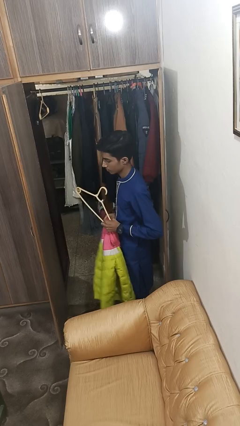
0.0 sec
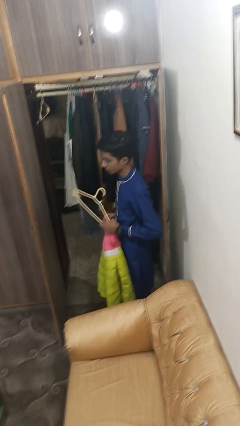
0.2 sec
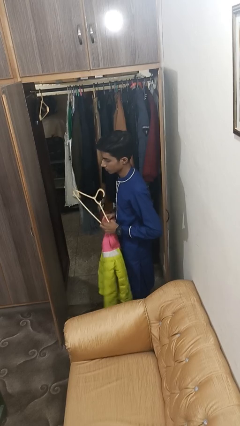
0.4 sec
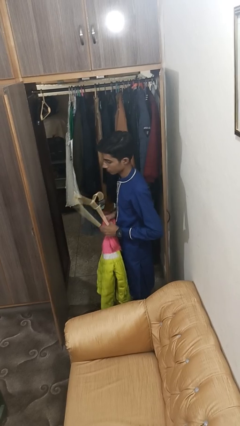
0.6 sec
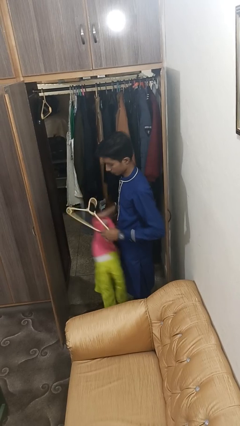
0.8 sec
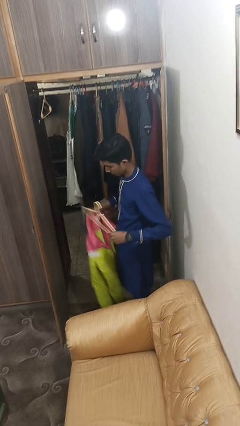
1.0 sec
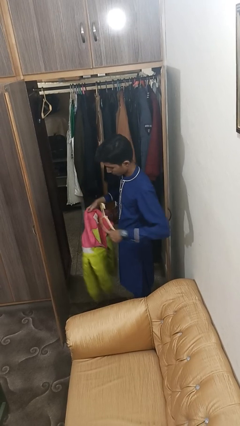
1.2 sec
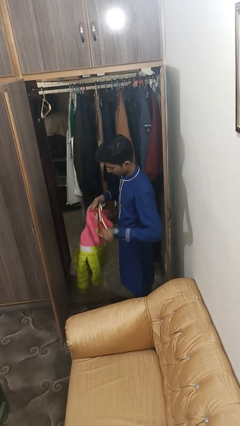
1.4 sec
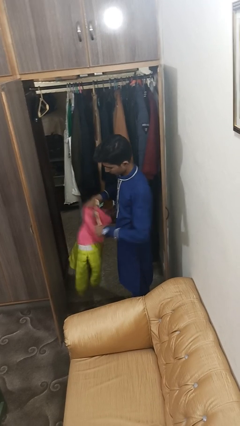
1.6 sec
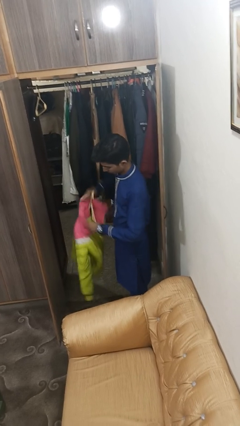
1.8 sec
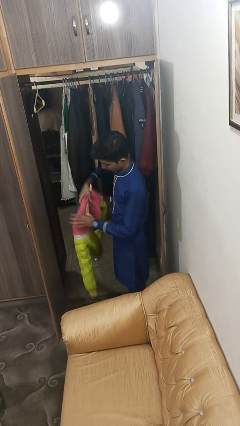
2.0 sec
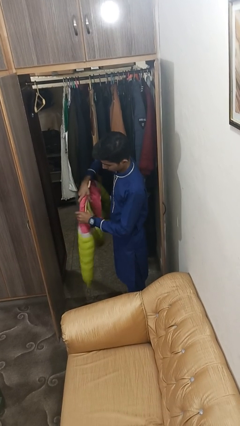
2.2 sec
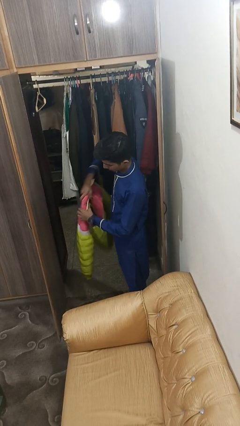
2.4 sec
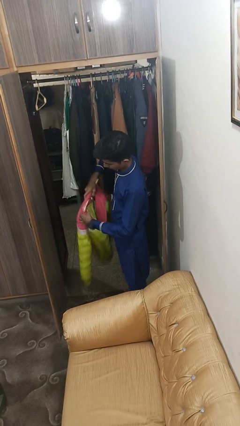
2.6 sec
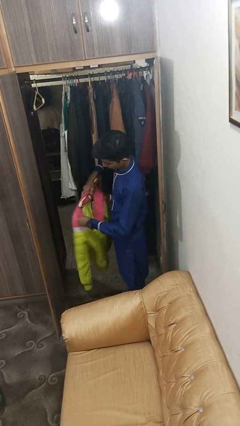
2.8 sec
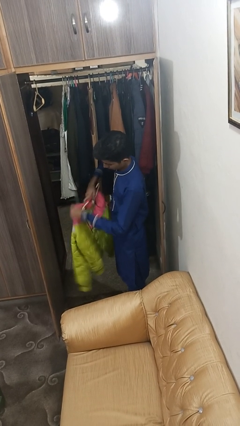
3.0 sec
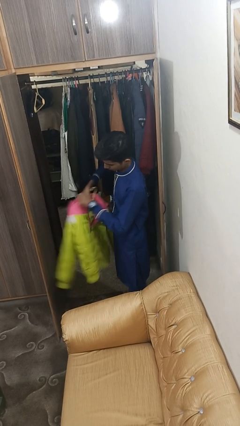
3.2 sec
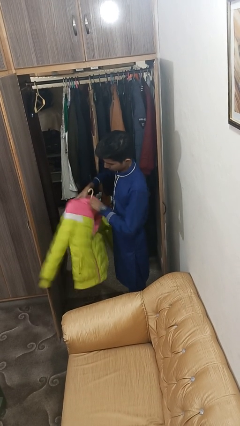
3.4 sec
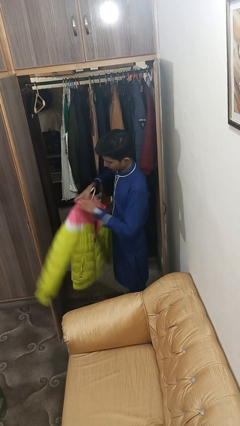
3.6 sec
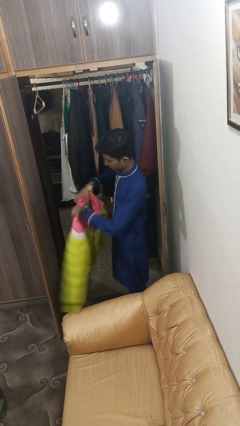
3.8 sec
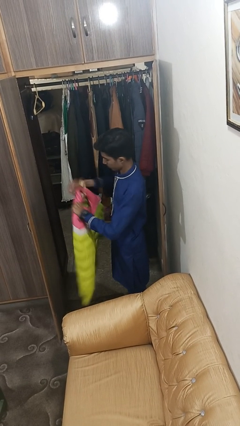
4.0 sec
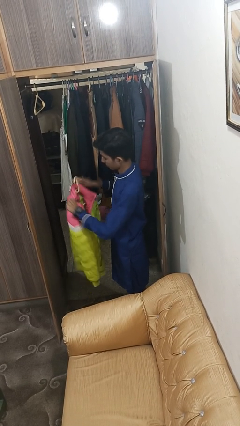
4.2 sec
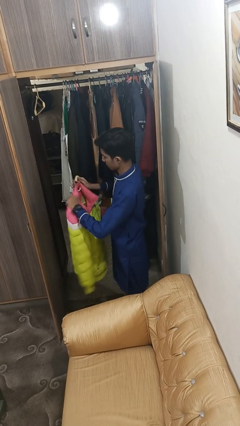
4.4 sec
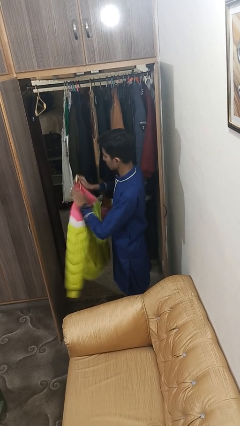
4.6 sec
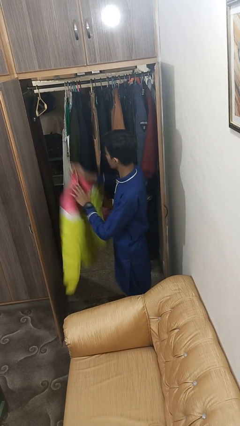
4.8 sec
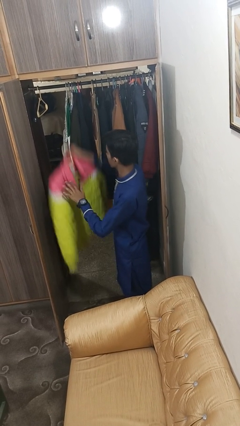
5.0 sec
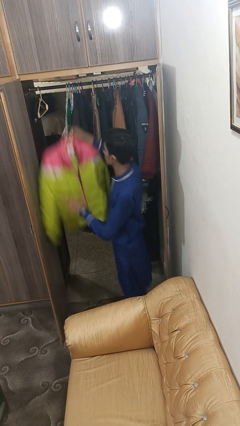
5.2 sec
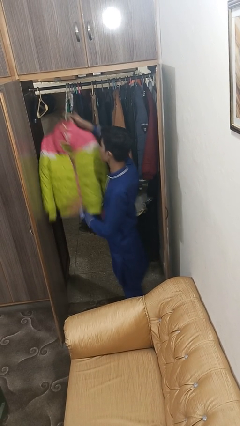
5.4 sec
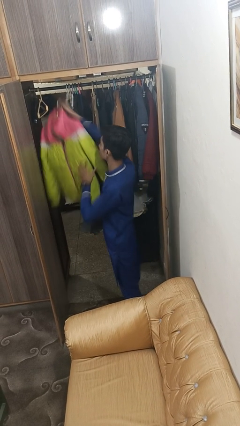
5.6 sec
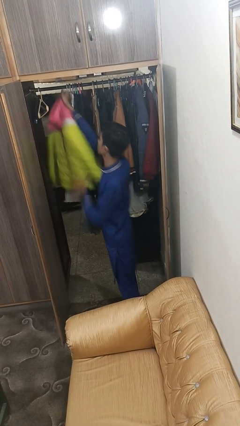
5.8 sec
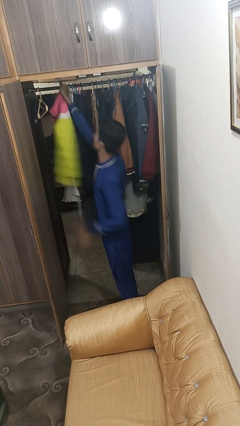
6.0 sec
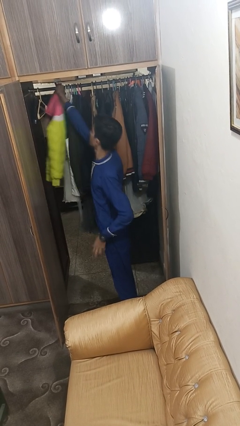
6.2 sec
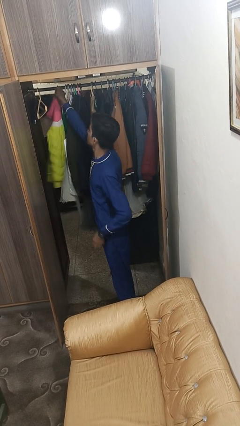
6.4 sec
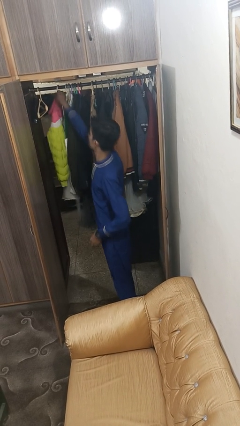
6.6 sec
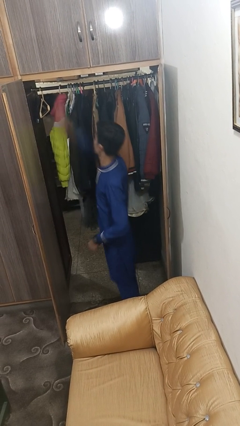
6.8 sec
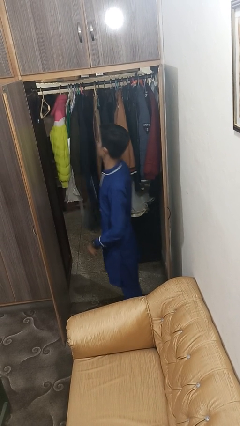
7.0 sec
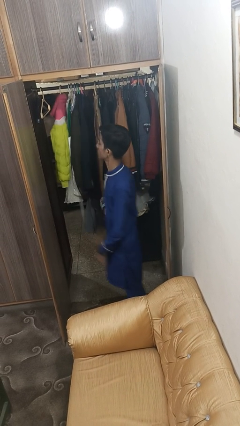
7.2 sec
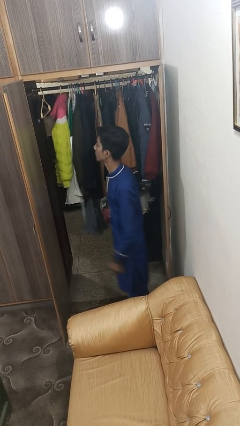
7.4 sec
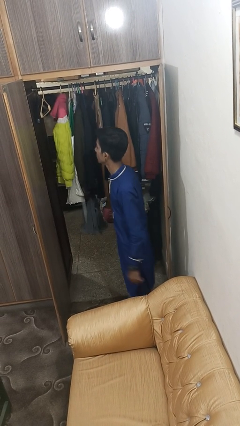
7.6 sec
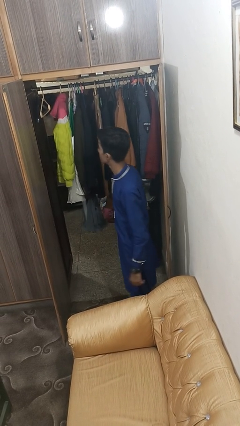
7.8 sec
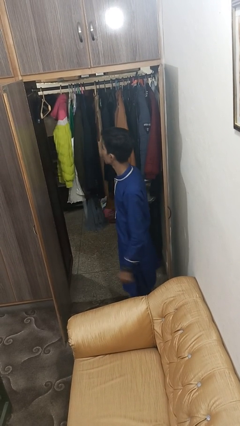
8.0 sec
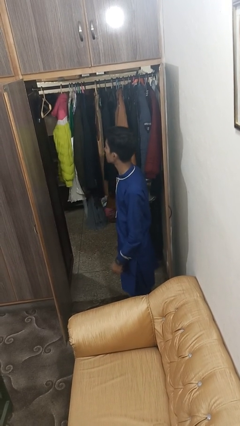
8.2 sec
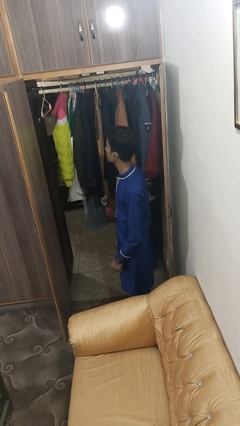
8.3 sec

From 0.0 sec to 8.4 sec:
person puts clothes into closet

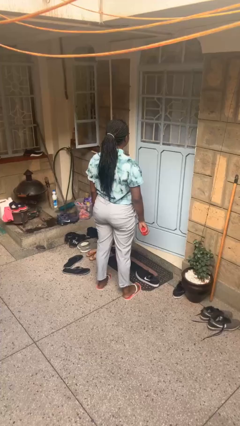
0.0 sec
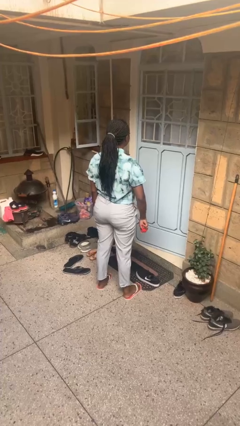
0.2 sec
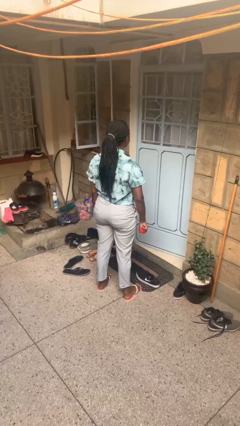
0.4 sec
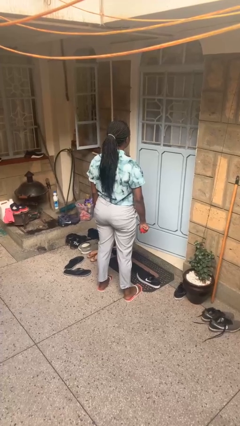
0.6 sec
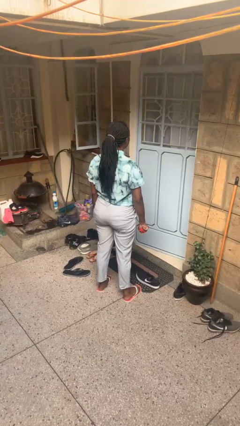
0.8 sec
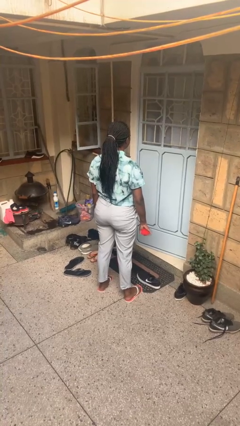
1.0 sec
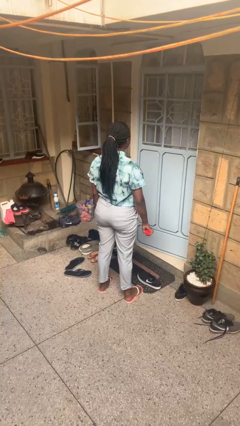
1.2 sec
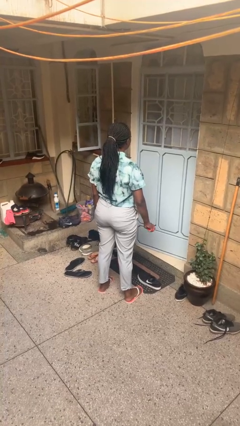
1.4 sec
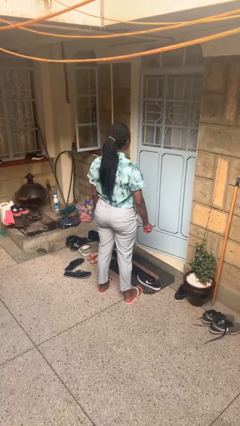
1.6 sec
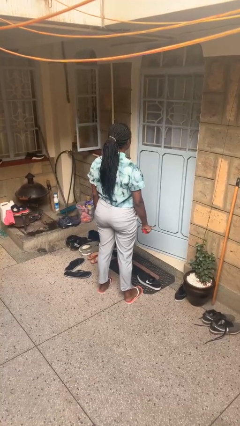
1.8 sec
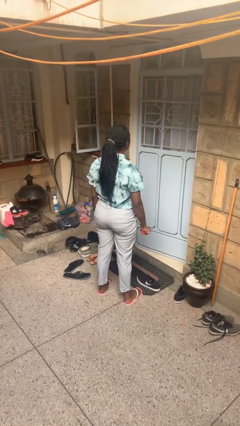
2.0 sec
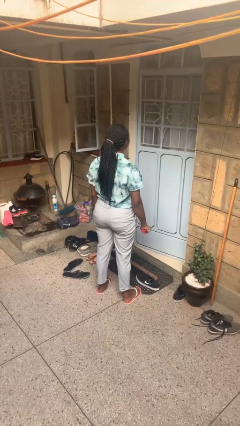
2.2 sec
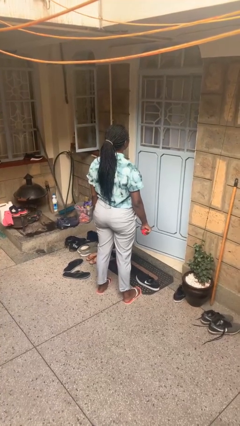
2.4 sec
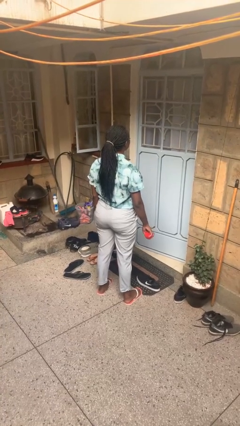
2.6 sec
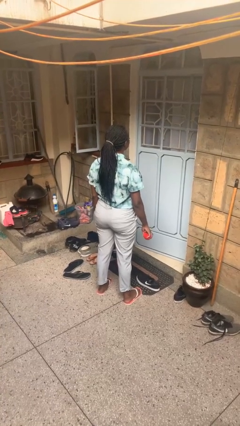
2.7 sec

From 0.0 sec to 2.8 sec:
person squeezes object

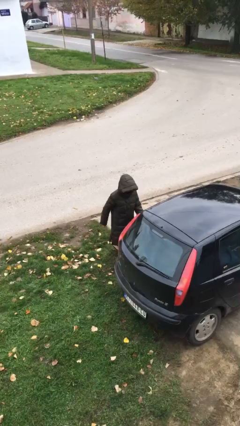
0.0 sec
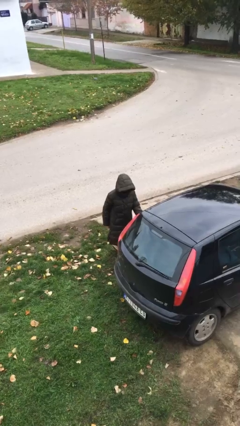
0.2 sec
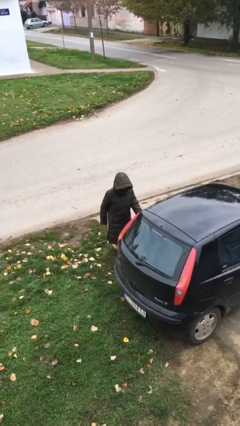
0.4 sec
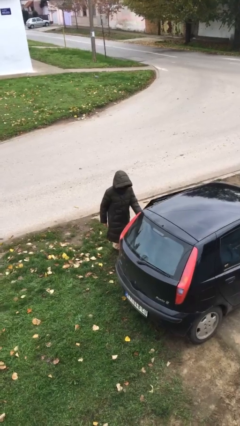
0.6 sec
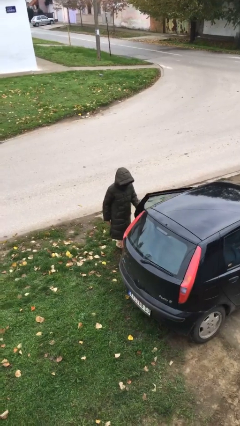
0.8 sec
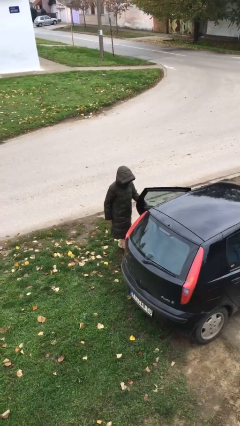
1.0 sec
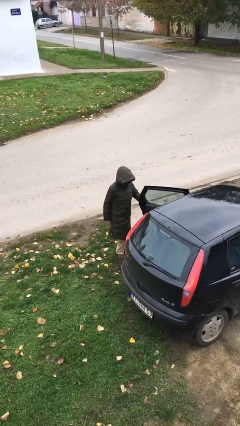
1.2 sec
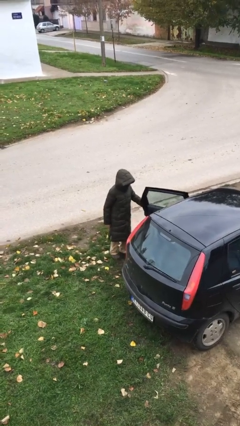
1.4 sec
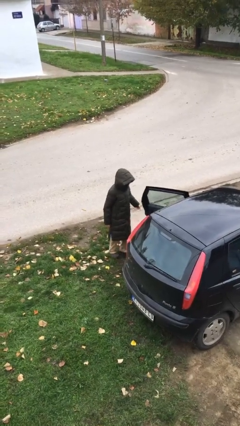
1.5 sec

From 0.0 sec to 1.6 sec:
person opens car door

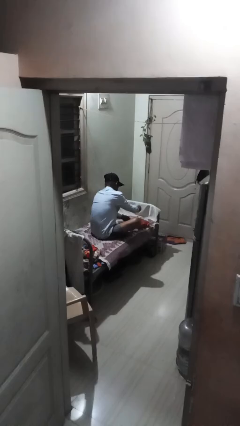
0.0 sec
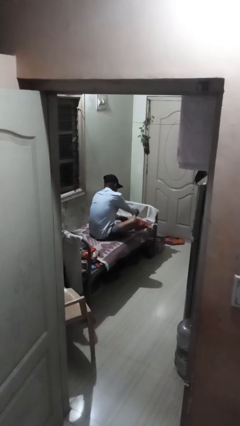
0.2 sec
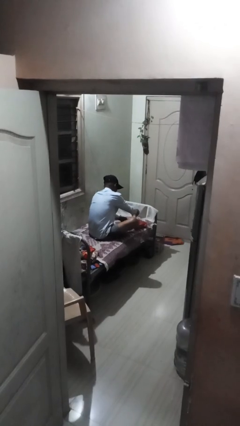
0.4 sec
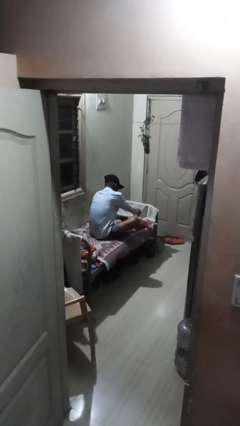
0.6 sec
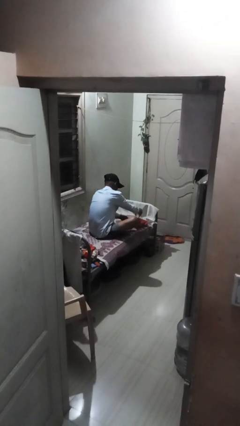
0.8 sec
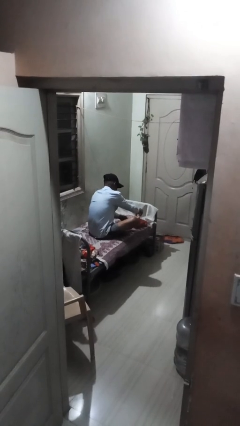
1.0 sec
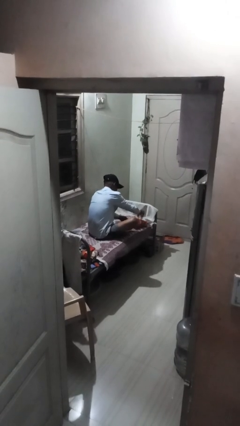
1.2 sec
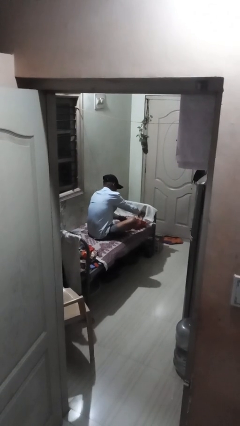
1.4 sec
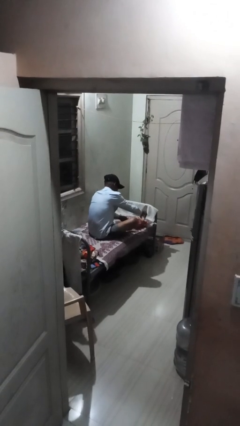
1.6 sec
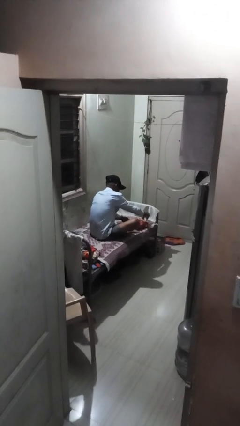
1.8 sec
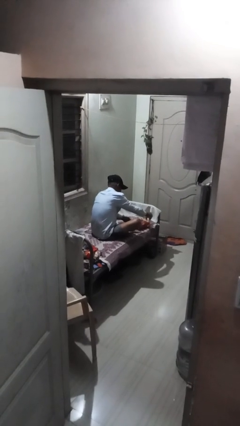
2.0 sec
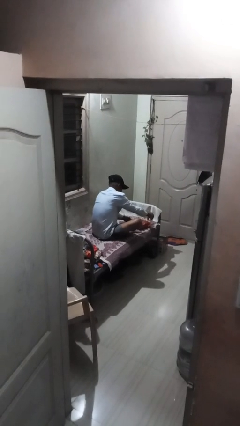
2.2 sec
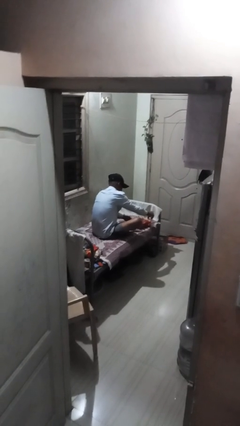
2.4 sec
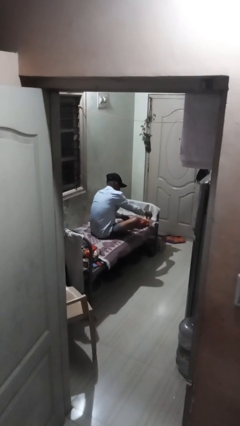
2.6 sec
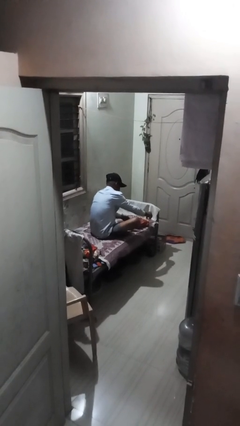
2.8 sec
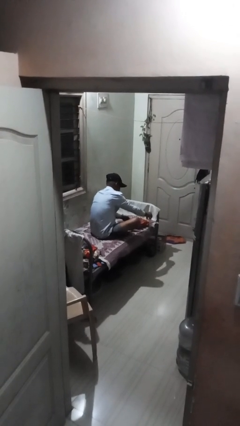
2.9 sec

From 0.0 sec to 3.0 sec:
person wraps box

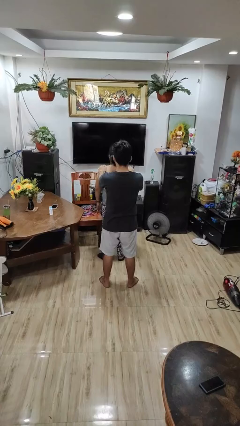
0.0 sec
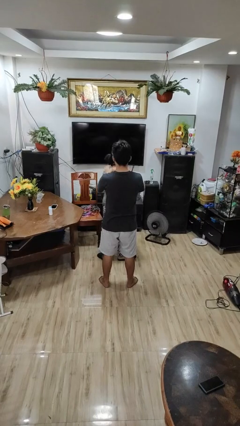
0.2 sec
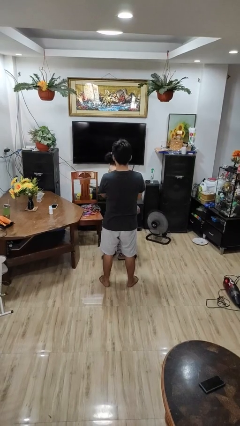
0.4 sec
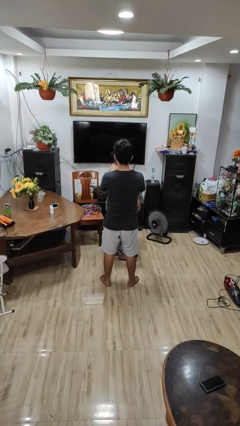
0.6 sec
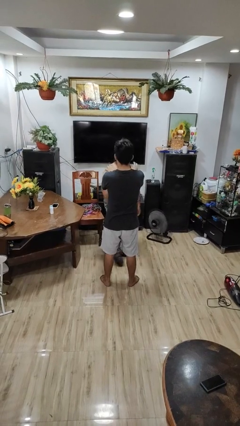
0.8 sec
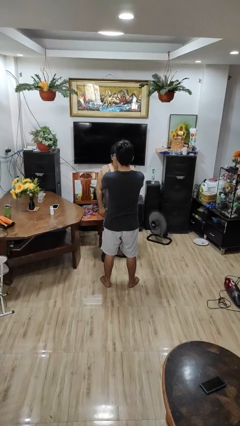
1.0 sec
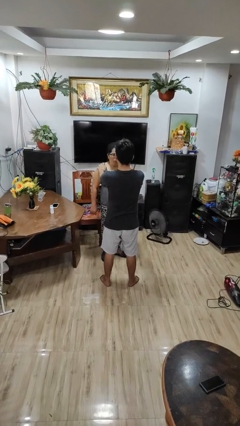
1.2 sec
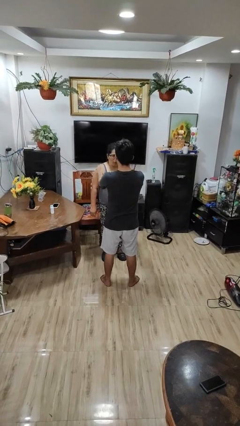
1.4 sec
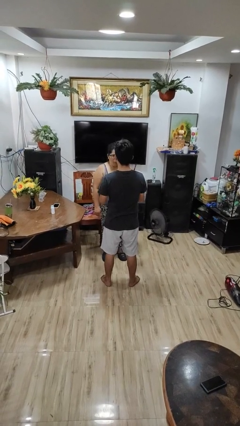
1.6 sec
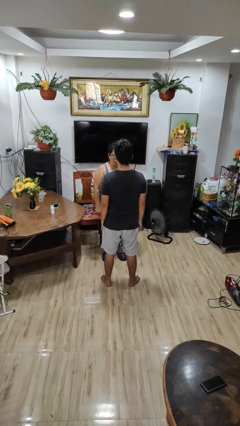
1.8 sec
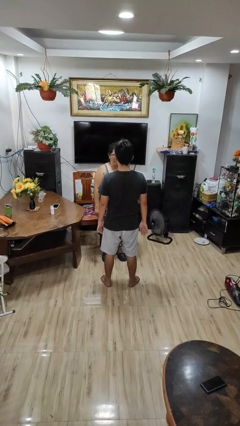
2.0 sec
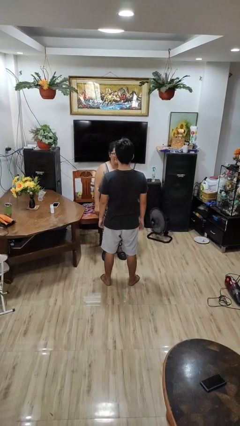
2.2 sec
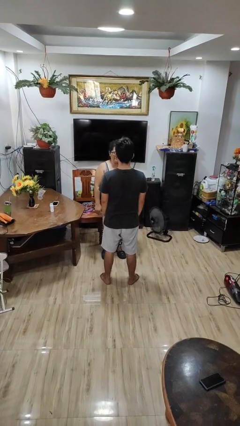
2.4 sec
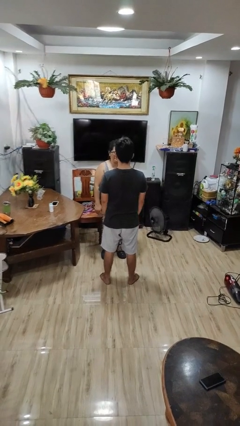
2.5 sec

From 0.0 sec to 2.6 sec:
person spins person around
